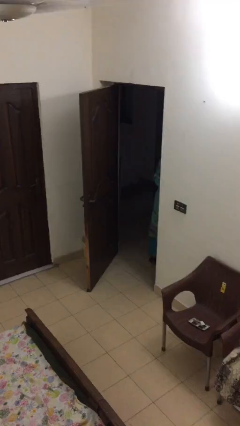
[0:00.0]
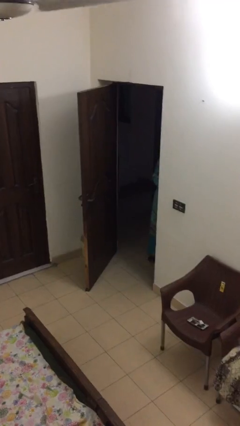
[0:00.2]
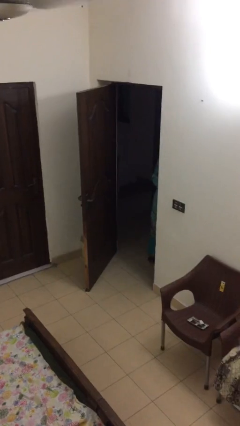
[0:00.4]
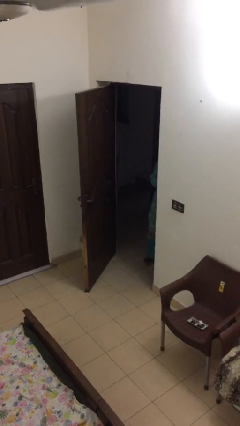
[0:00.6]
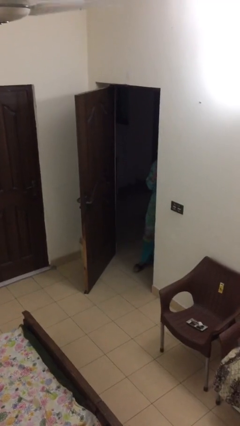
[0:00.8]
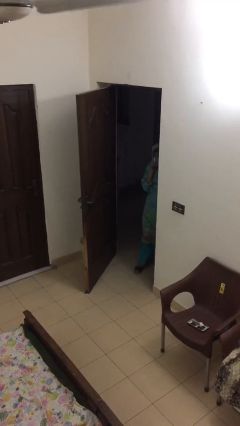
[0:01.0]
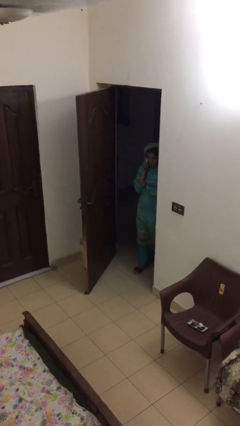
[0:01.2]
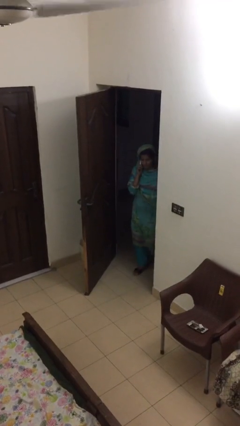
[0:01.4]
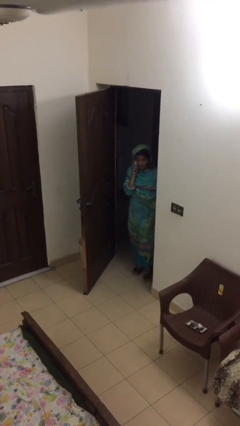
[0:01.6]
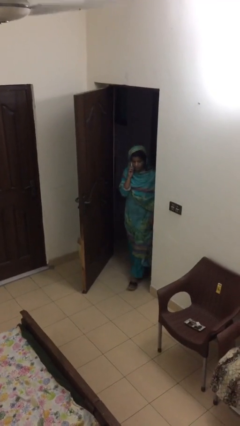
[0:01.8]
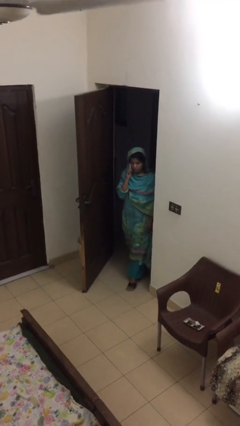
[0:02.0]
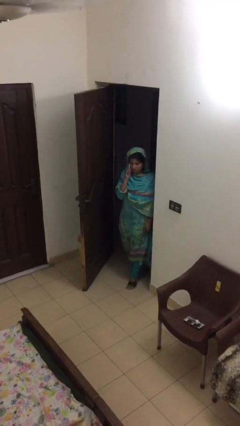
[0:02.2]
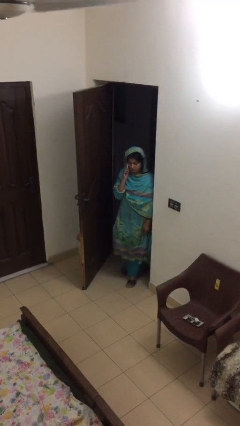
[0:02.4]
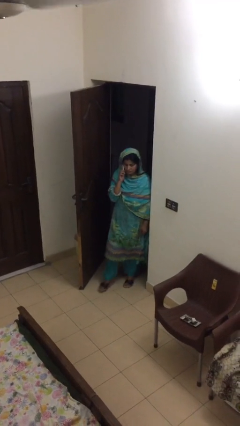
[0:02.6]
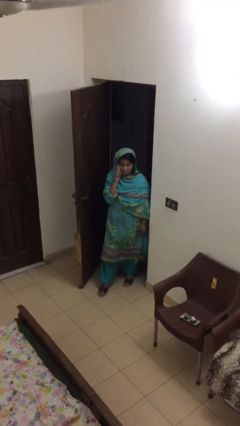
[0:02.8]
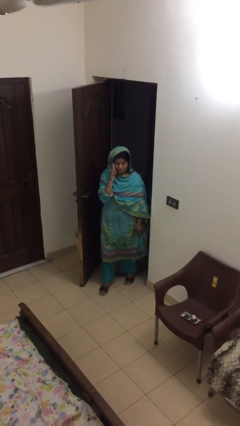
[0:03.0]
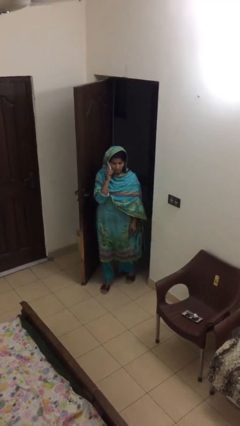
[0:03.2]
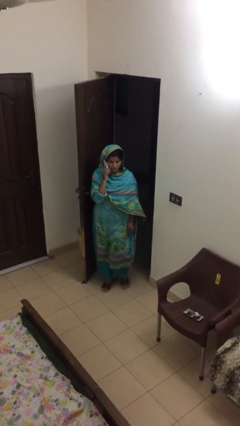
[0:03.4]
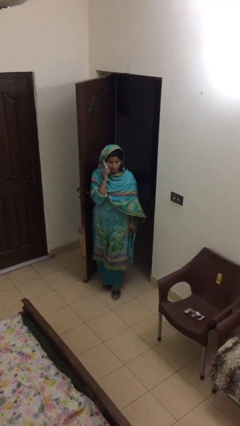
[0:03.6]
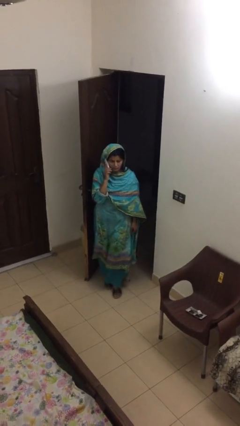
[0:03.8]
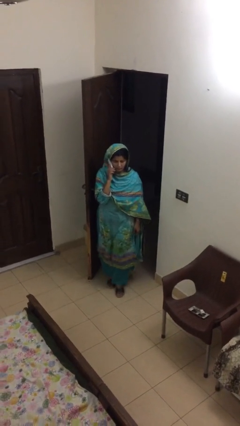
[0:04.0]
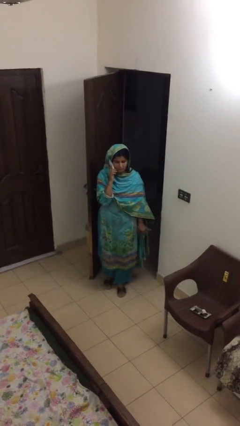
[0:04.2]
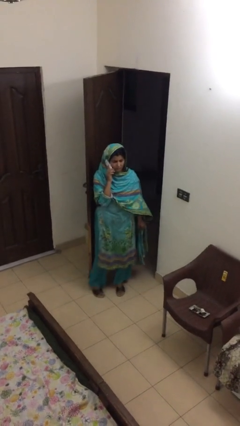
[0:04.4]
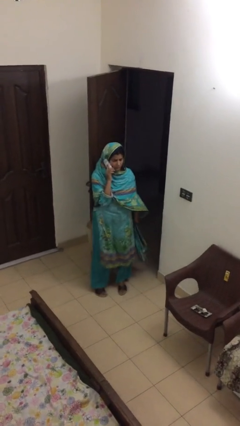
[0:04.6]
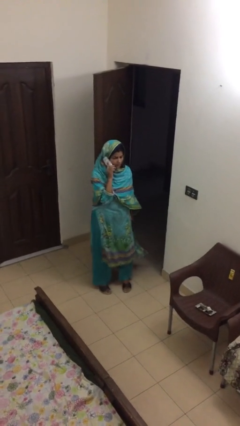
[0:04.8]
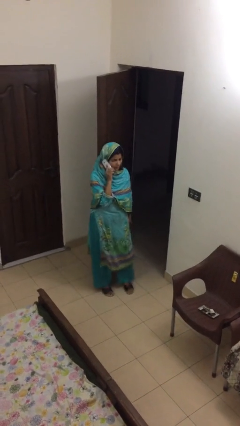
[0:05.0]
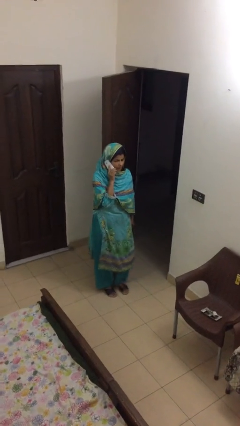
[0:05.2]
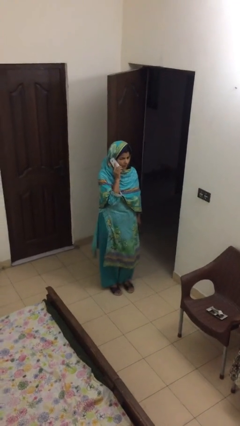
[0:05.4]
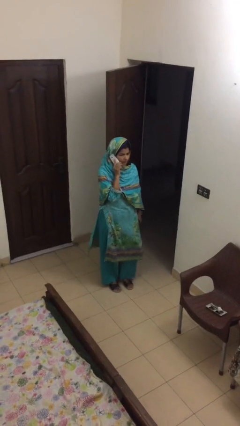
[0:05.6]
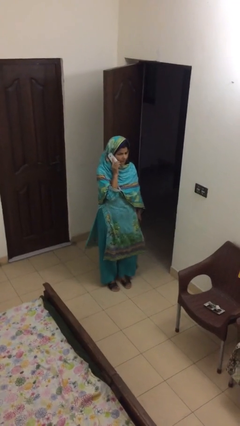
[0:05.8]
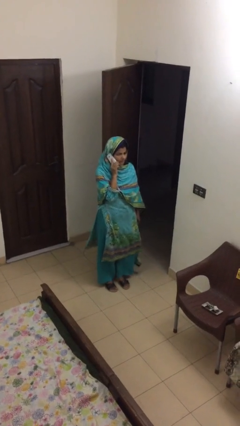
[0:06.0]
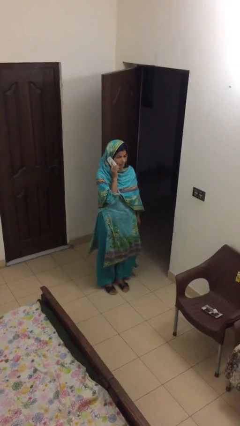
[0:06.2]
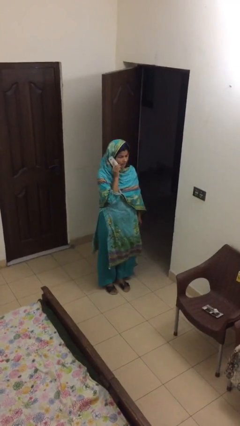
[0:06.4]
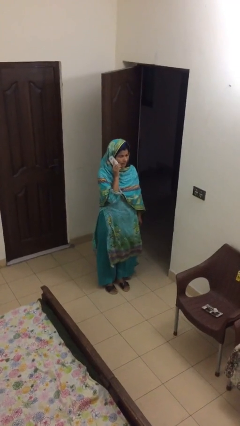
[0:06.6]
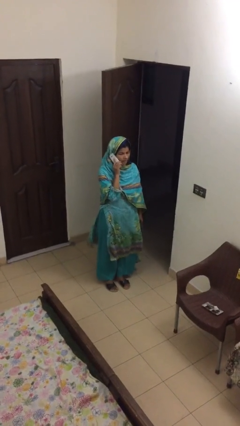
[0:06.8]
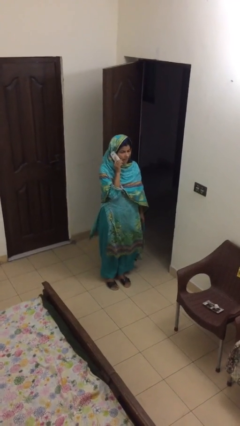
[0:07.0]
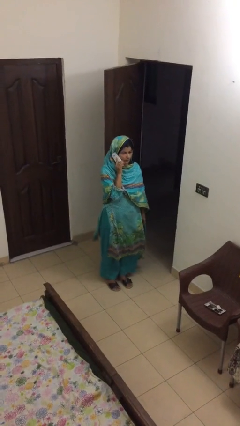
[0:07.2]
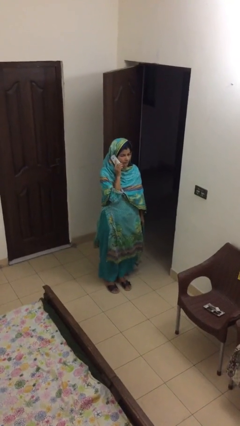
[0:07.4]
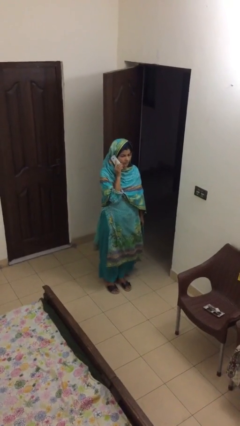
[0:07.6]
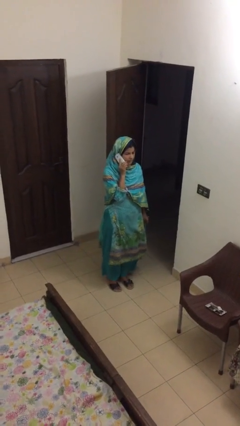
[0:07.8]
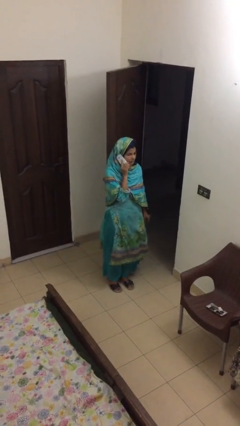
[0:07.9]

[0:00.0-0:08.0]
person enters scene through structure

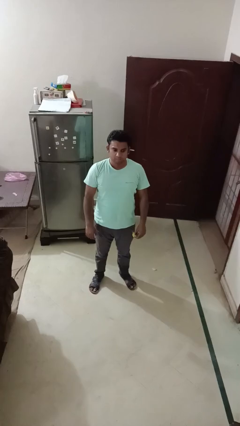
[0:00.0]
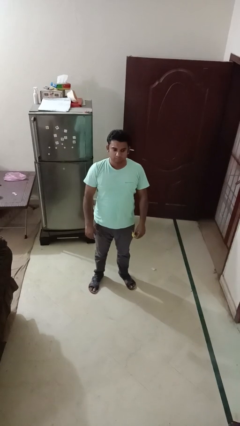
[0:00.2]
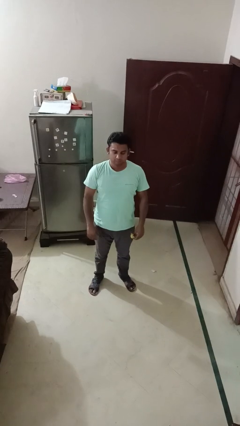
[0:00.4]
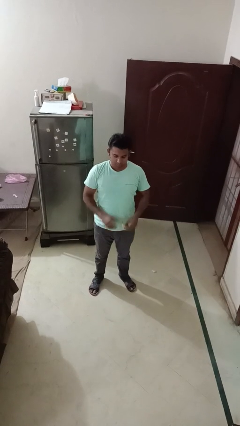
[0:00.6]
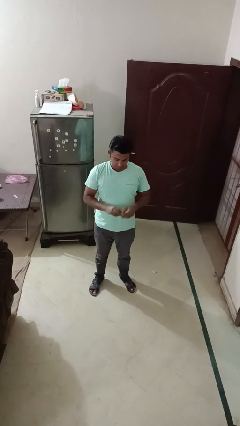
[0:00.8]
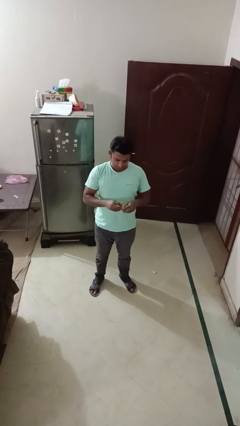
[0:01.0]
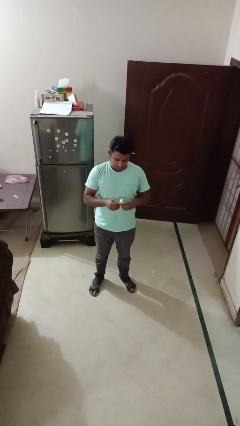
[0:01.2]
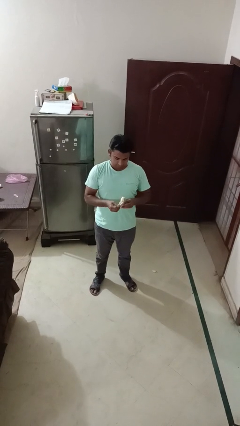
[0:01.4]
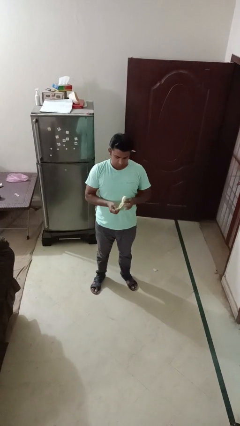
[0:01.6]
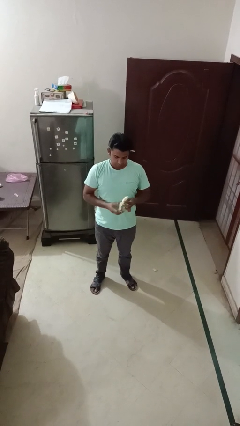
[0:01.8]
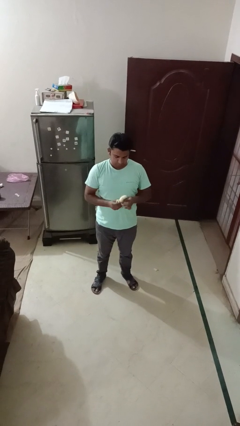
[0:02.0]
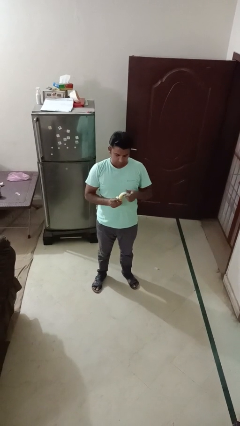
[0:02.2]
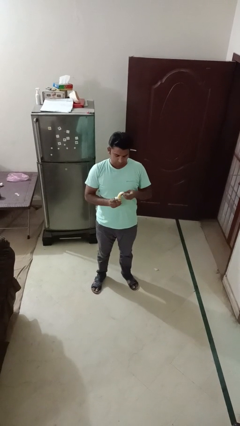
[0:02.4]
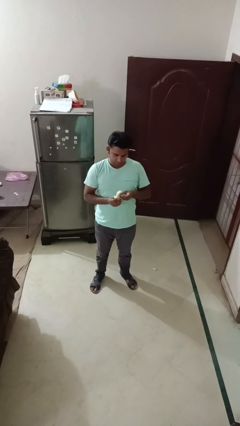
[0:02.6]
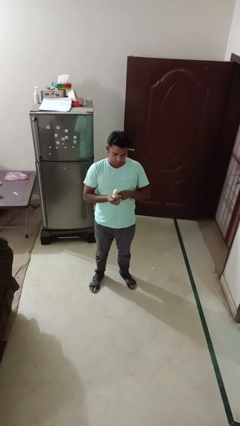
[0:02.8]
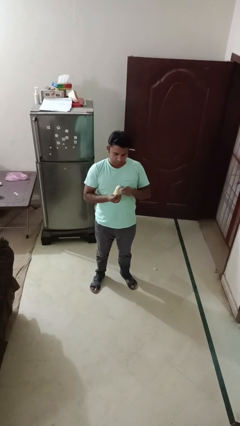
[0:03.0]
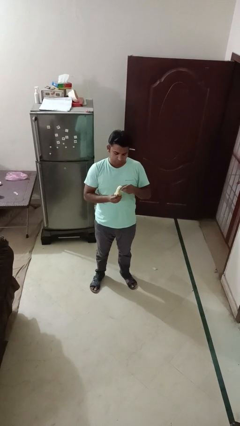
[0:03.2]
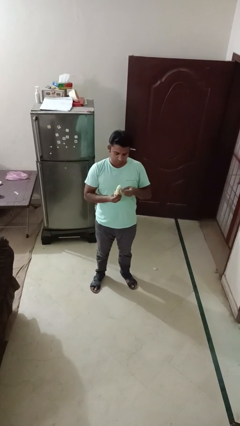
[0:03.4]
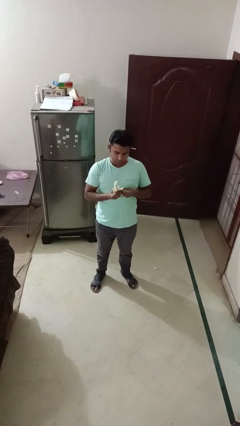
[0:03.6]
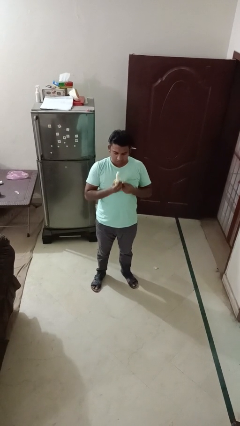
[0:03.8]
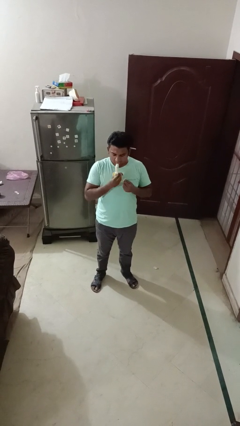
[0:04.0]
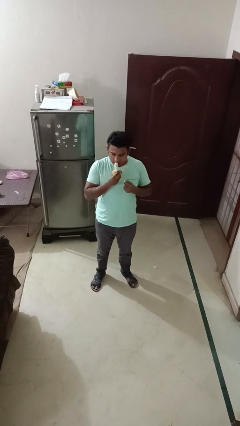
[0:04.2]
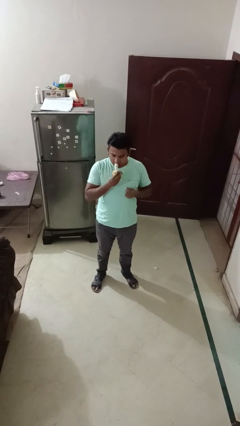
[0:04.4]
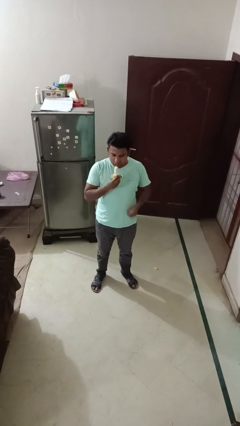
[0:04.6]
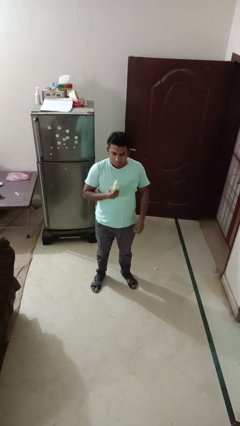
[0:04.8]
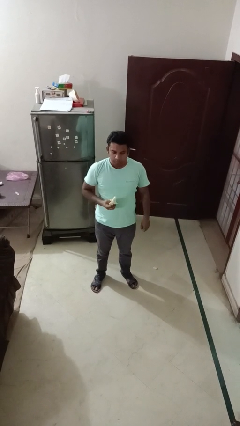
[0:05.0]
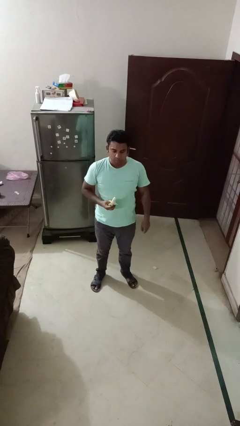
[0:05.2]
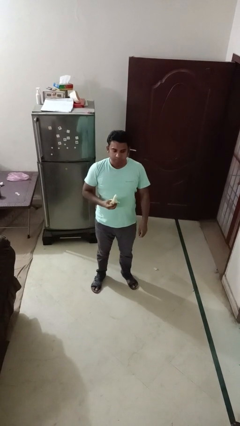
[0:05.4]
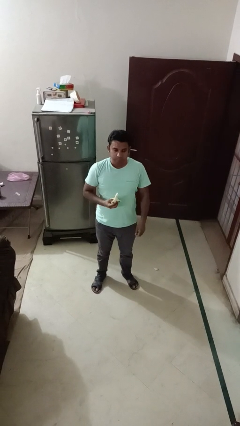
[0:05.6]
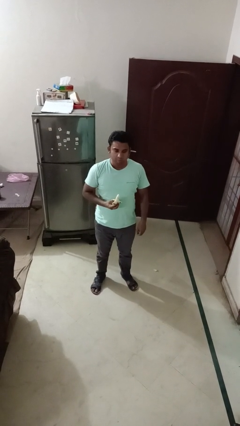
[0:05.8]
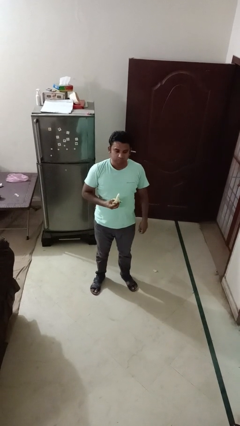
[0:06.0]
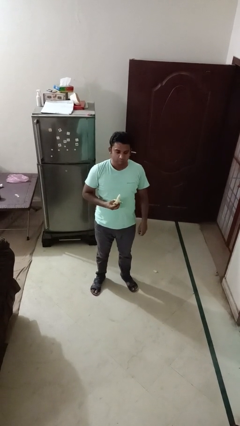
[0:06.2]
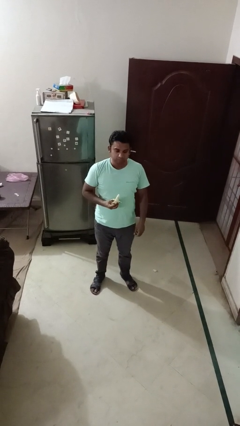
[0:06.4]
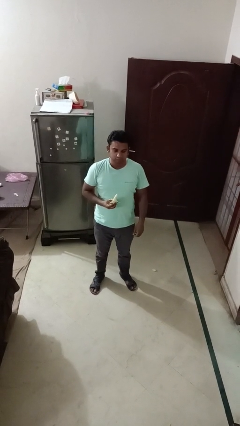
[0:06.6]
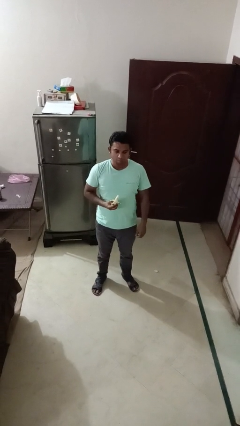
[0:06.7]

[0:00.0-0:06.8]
person eats banana

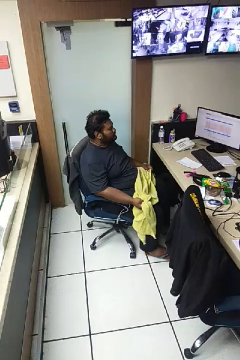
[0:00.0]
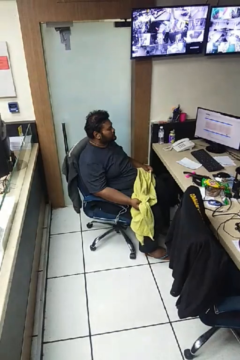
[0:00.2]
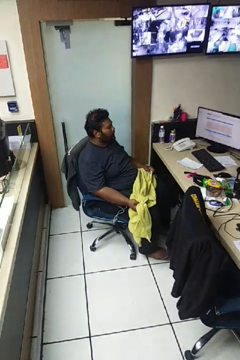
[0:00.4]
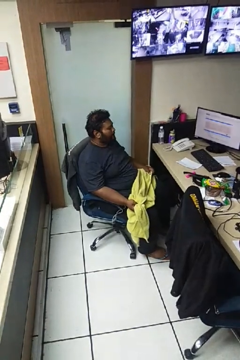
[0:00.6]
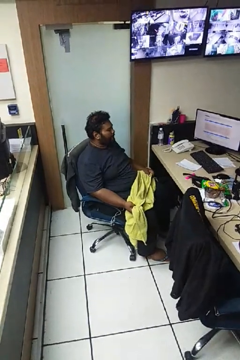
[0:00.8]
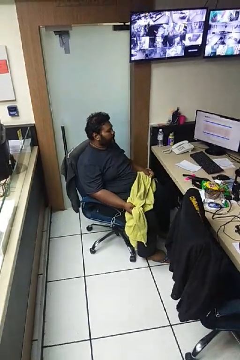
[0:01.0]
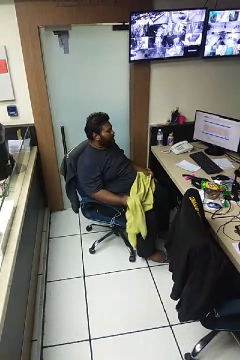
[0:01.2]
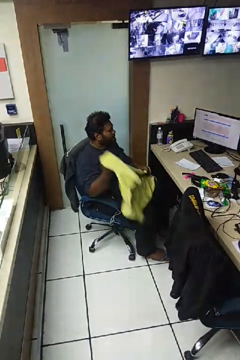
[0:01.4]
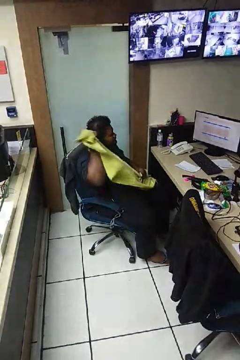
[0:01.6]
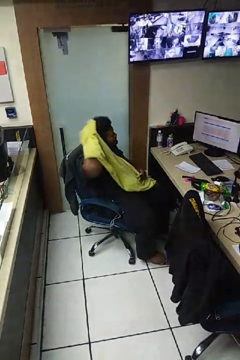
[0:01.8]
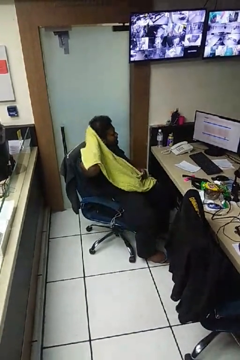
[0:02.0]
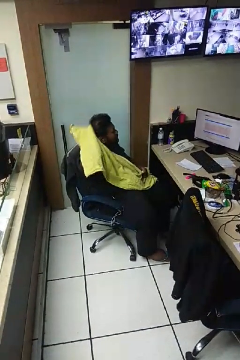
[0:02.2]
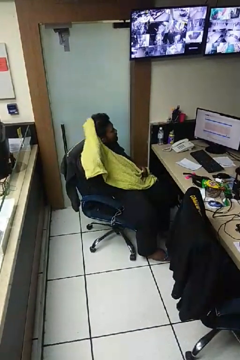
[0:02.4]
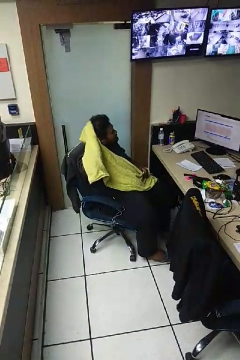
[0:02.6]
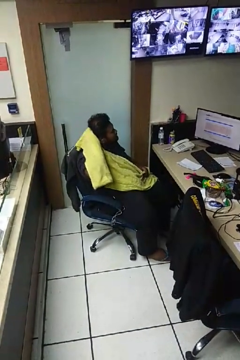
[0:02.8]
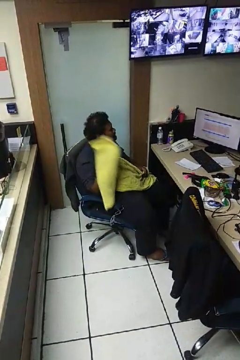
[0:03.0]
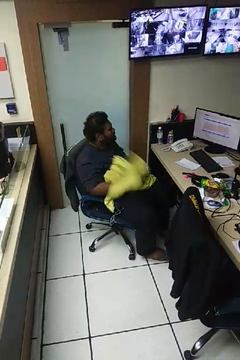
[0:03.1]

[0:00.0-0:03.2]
person dries hair with towel

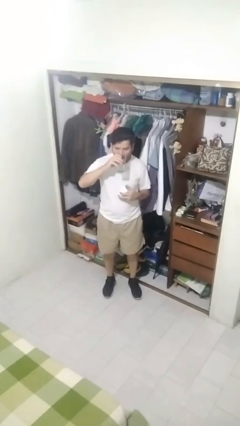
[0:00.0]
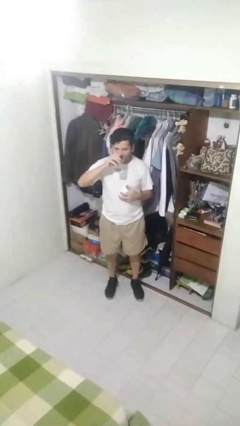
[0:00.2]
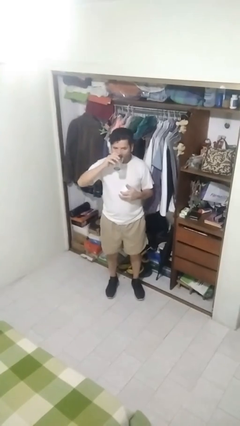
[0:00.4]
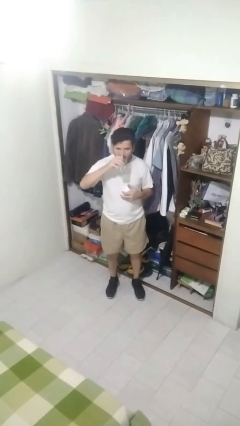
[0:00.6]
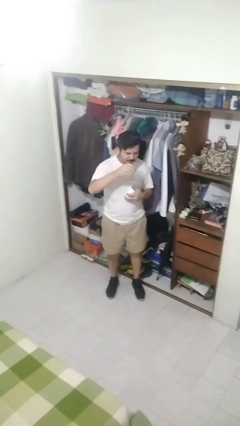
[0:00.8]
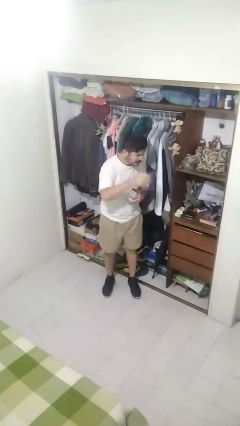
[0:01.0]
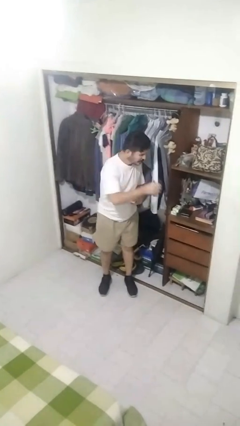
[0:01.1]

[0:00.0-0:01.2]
person drinks from cup
